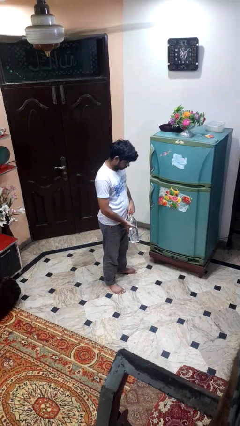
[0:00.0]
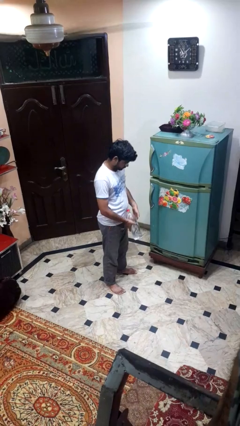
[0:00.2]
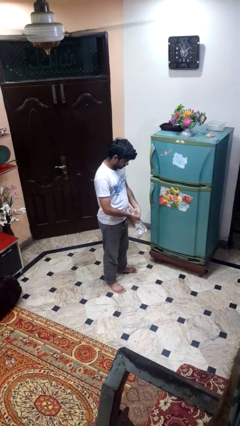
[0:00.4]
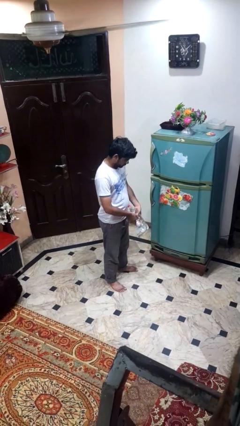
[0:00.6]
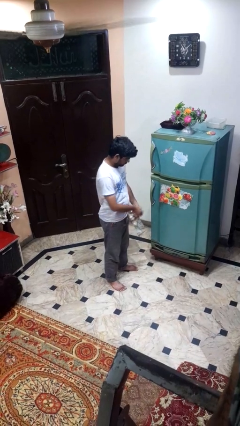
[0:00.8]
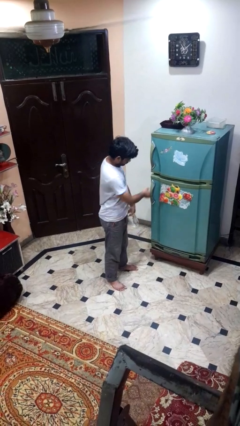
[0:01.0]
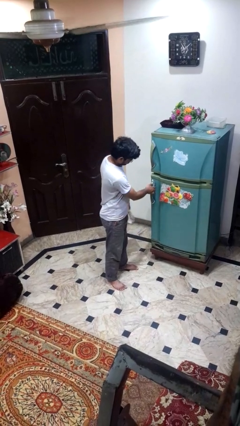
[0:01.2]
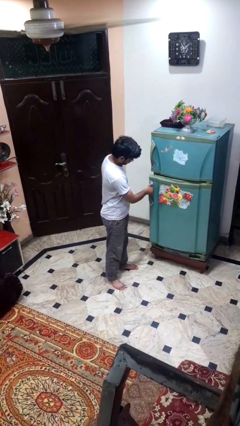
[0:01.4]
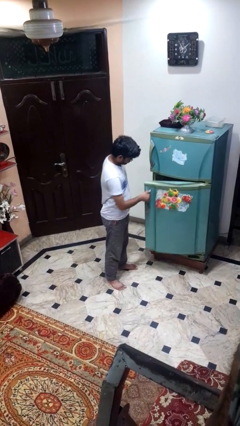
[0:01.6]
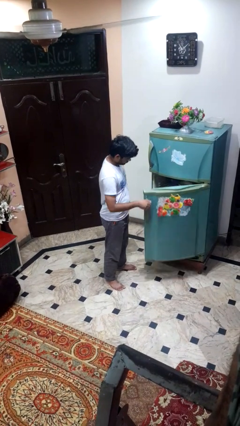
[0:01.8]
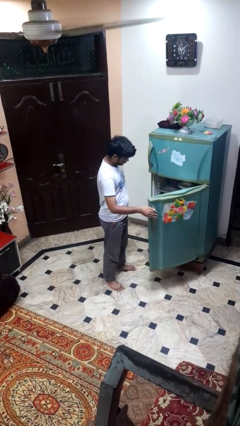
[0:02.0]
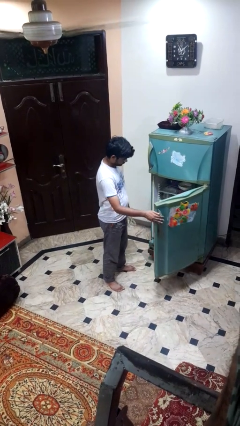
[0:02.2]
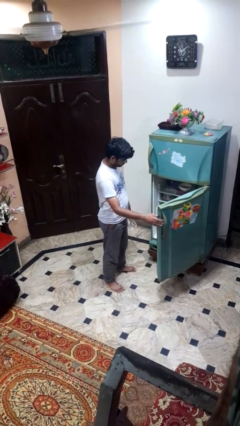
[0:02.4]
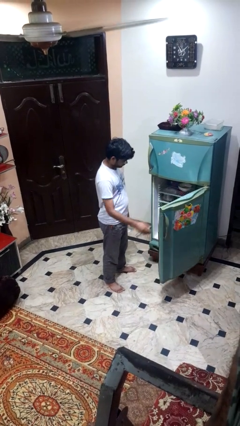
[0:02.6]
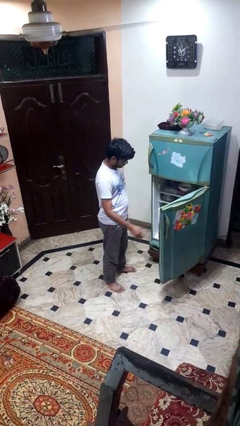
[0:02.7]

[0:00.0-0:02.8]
person opens refrigerator

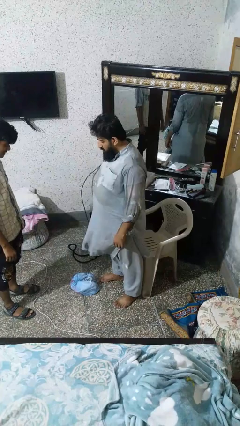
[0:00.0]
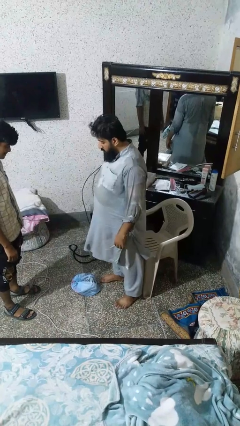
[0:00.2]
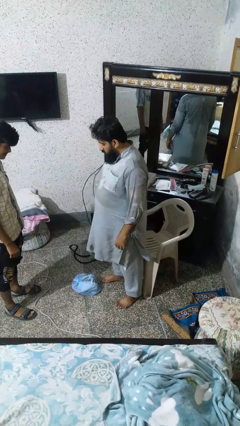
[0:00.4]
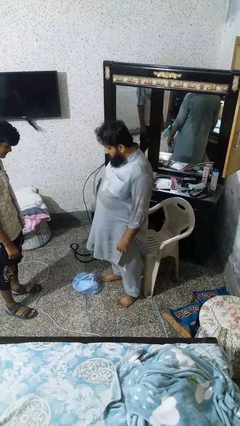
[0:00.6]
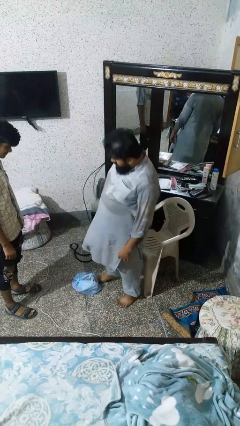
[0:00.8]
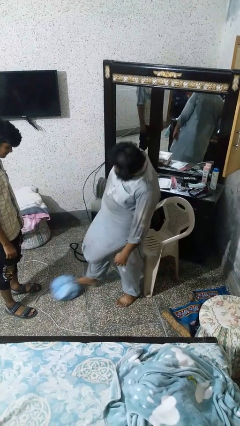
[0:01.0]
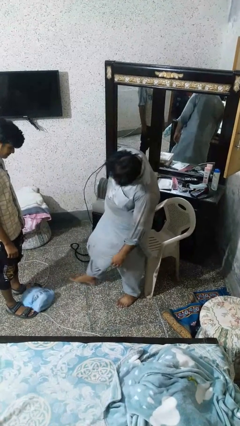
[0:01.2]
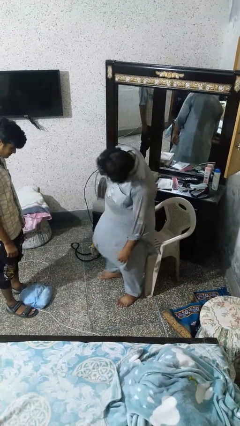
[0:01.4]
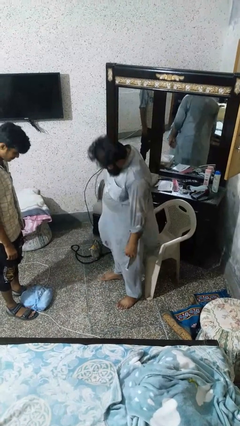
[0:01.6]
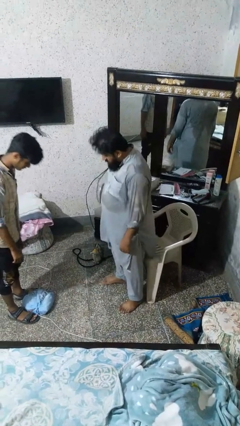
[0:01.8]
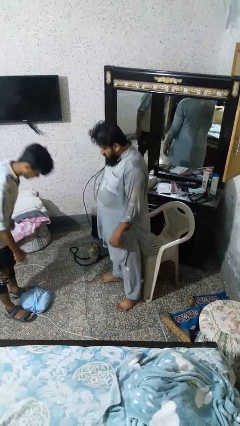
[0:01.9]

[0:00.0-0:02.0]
person kicks object to person

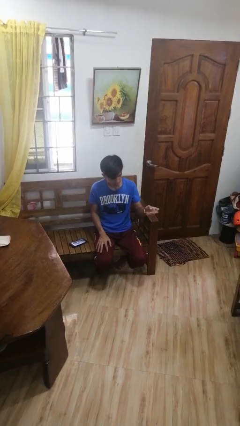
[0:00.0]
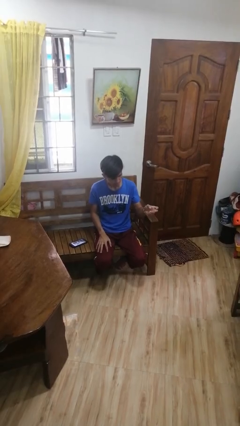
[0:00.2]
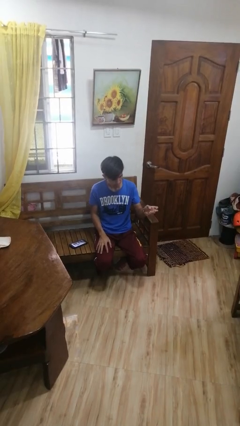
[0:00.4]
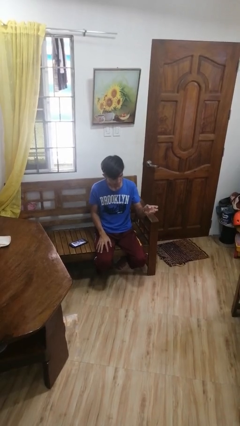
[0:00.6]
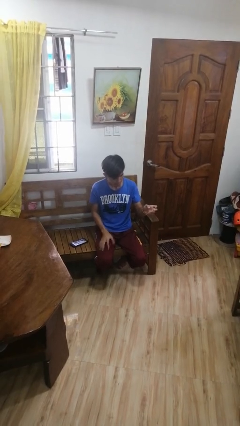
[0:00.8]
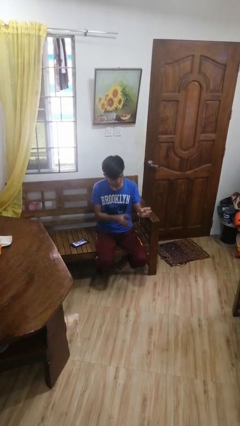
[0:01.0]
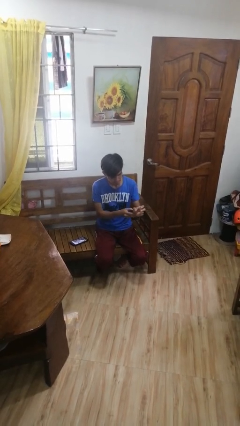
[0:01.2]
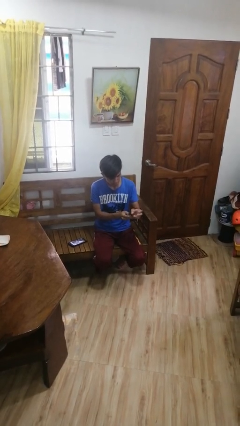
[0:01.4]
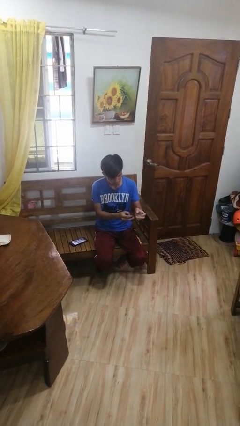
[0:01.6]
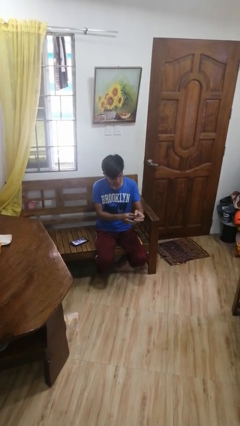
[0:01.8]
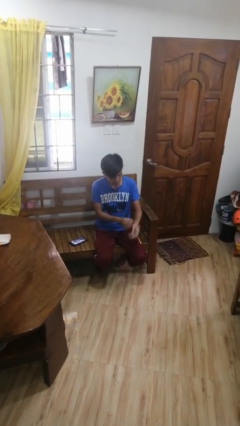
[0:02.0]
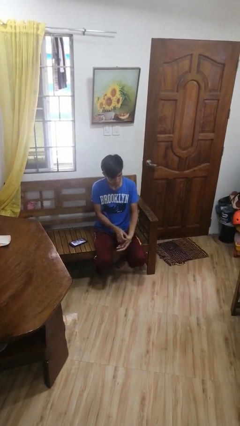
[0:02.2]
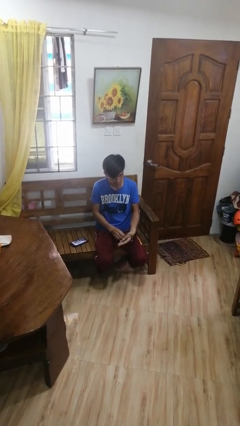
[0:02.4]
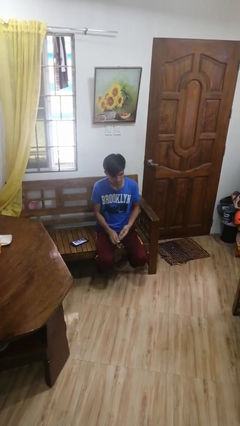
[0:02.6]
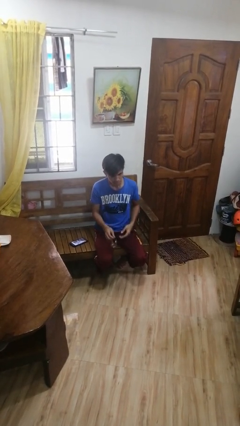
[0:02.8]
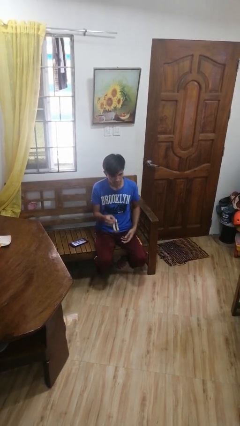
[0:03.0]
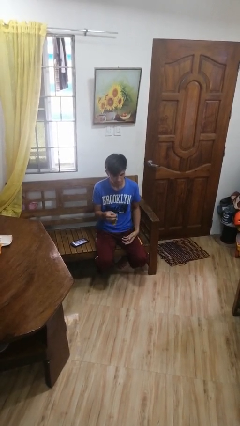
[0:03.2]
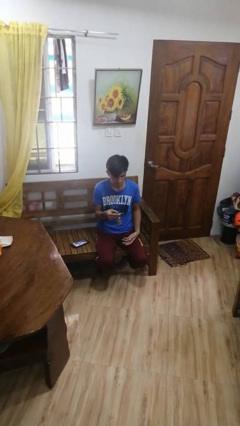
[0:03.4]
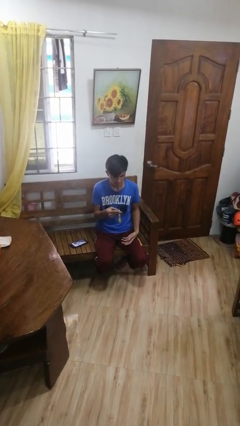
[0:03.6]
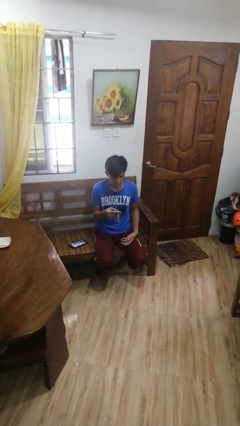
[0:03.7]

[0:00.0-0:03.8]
person takes off wristwatch

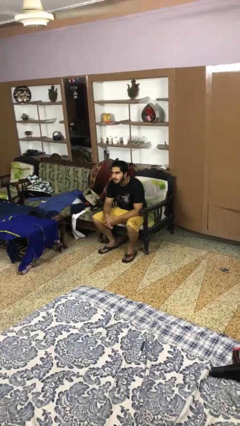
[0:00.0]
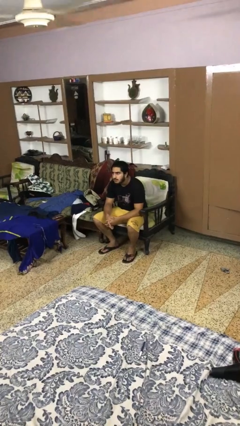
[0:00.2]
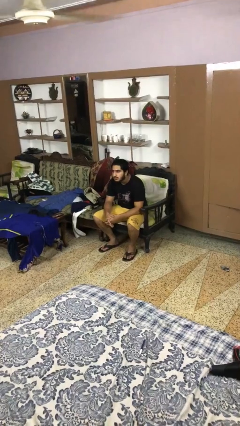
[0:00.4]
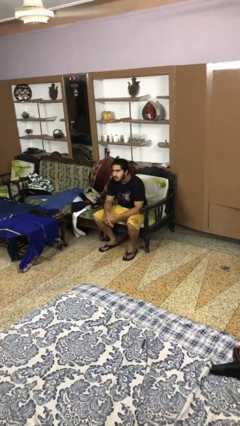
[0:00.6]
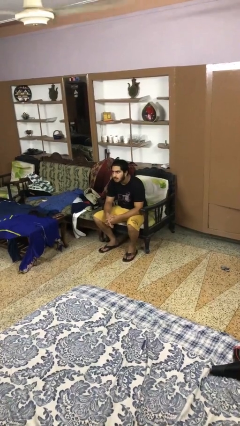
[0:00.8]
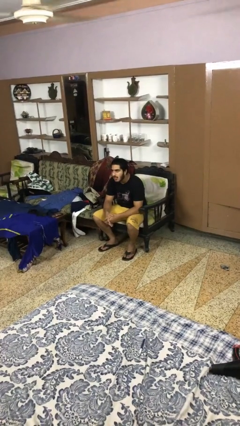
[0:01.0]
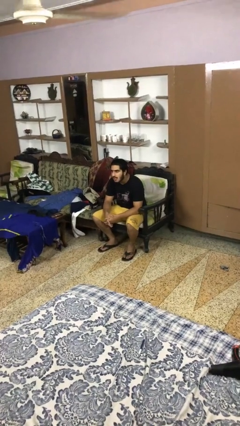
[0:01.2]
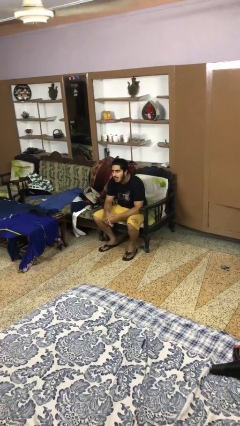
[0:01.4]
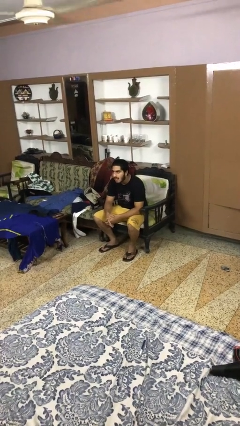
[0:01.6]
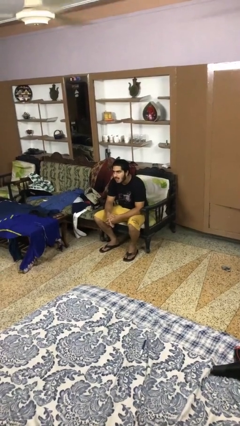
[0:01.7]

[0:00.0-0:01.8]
person sticks out tongue

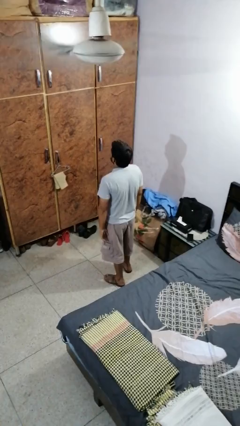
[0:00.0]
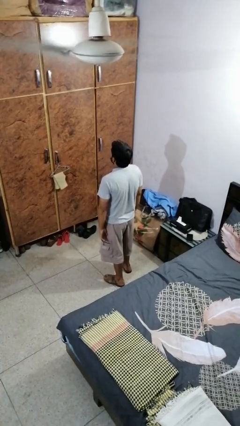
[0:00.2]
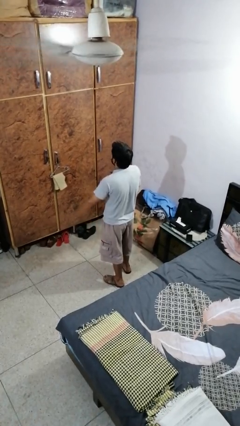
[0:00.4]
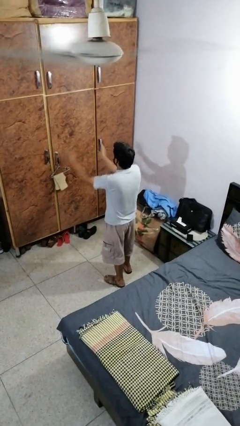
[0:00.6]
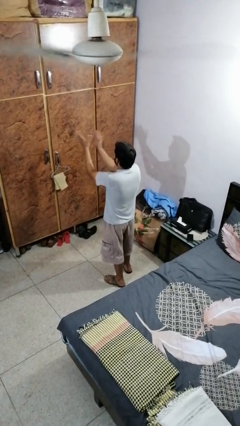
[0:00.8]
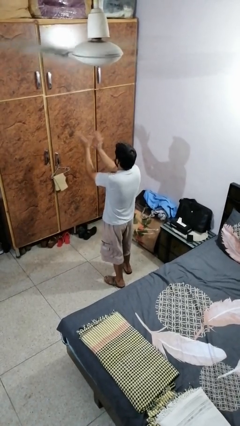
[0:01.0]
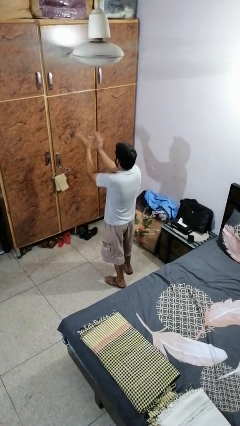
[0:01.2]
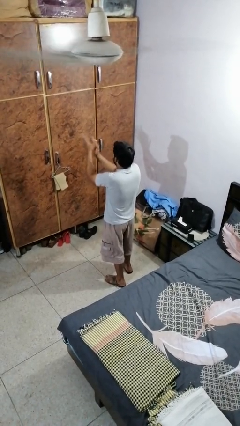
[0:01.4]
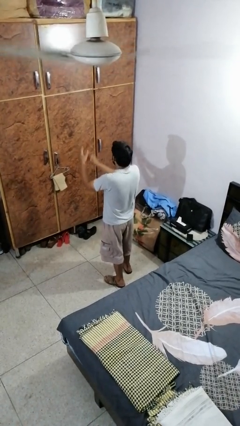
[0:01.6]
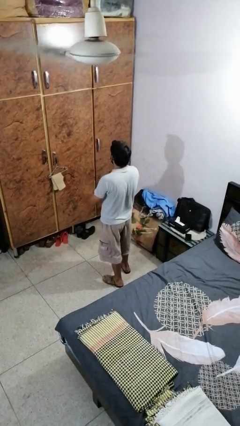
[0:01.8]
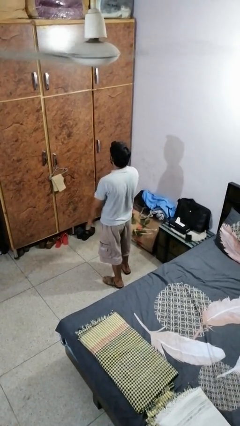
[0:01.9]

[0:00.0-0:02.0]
person claps hands

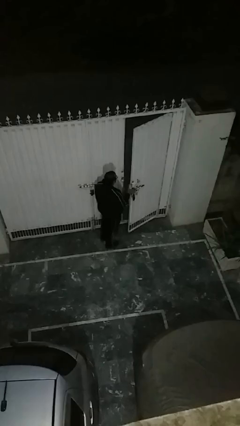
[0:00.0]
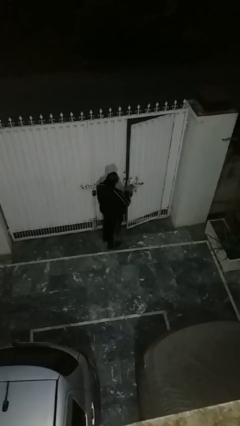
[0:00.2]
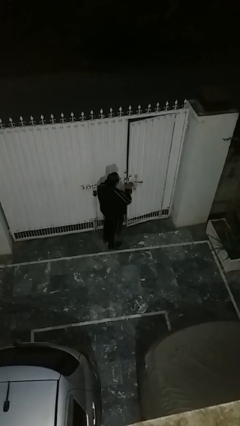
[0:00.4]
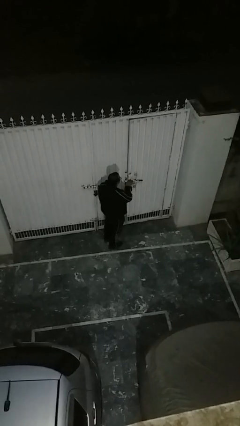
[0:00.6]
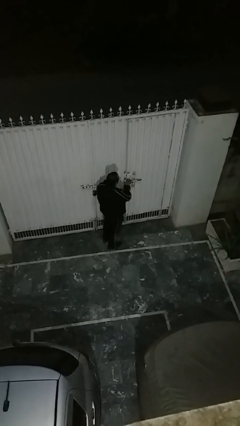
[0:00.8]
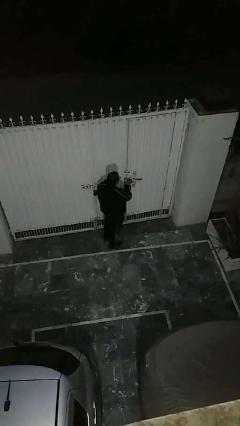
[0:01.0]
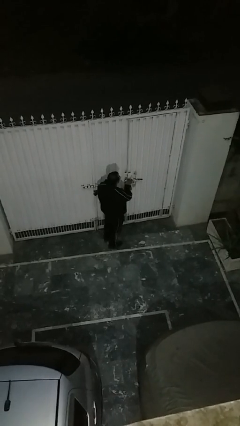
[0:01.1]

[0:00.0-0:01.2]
person closes facility door

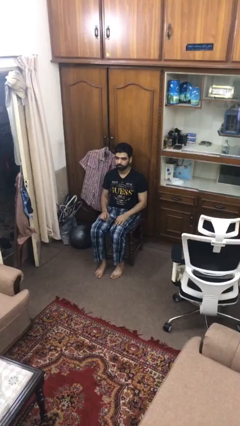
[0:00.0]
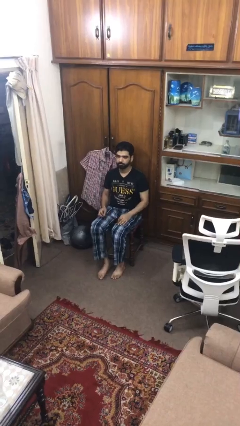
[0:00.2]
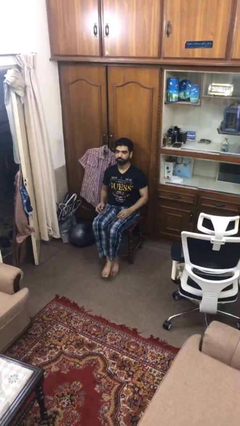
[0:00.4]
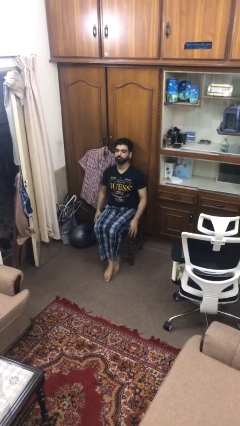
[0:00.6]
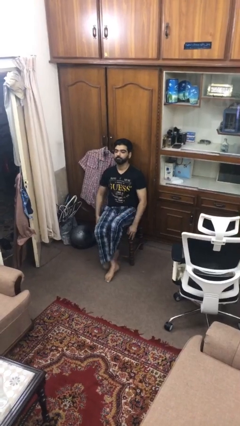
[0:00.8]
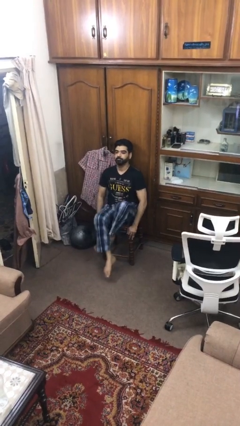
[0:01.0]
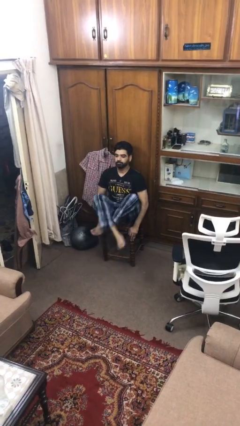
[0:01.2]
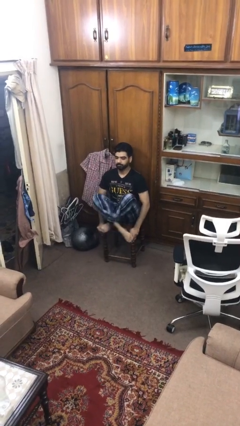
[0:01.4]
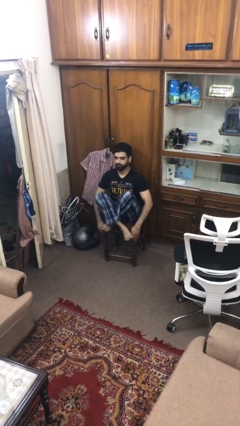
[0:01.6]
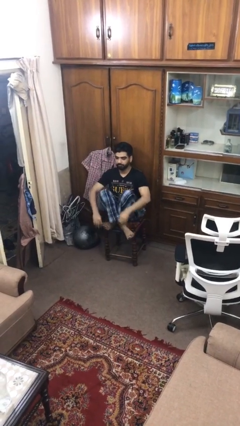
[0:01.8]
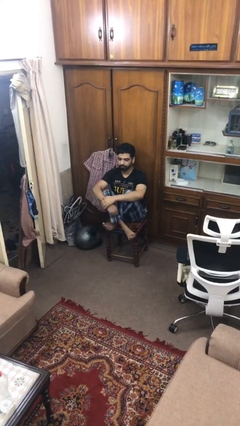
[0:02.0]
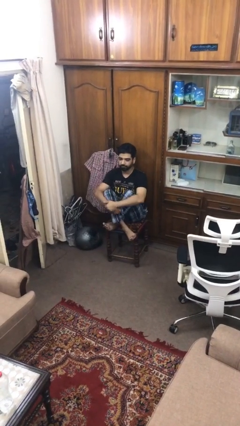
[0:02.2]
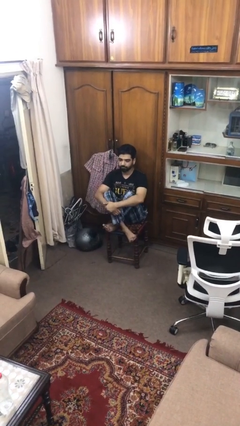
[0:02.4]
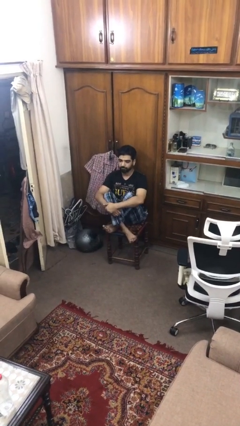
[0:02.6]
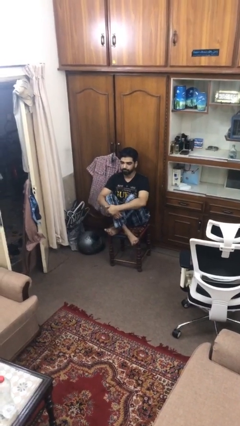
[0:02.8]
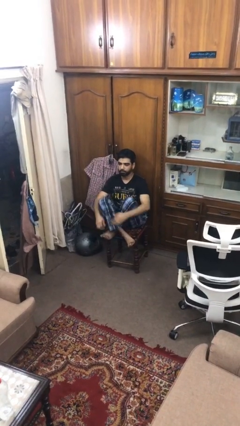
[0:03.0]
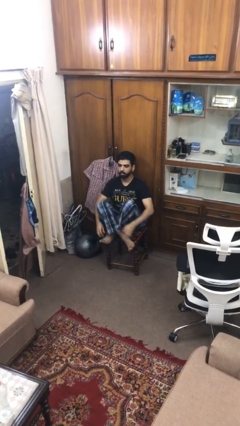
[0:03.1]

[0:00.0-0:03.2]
person crosses legs
